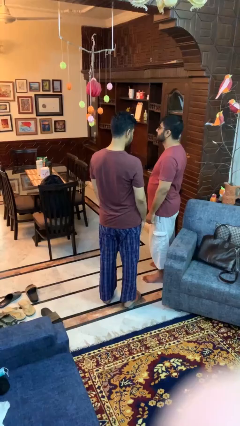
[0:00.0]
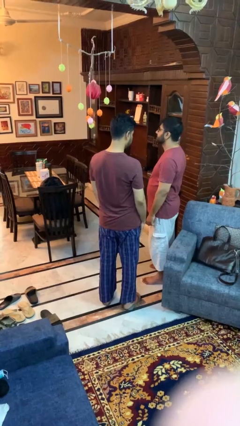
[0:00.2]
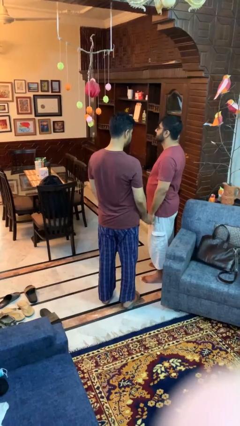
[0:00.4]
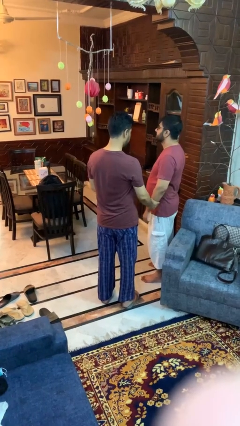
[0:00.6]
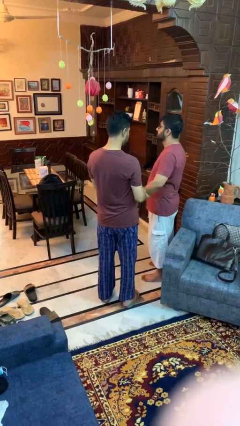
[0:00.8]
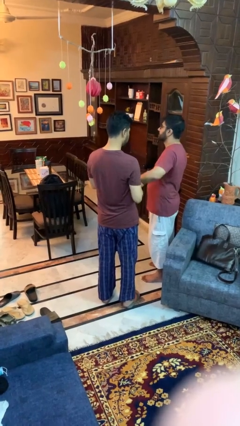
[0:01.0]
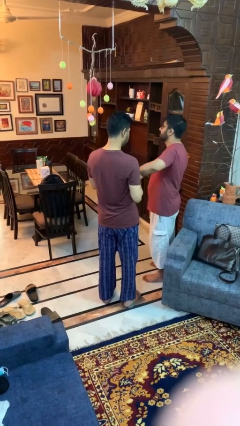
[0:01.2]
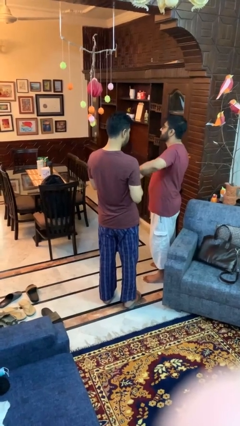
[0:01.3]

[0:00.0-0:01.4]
person grabs person by forearm

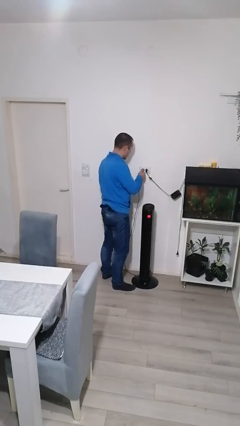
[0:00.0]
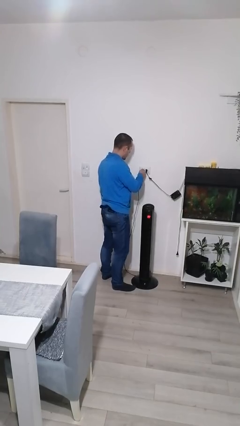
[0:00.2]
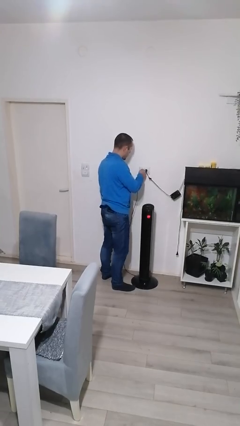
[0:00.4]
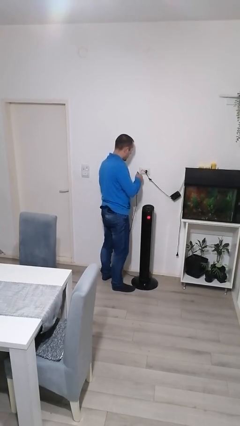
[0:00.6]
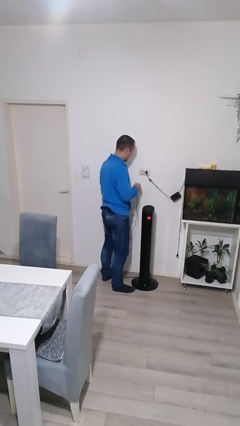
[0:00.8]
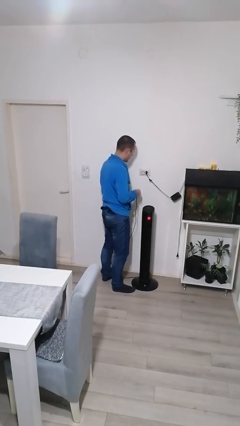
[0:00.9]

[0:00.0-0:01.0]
person unplugs from electrical socket

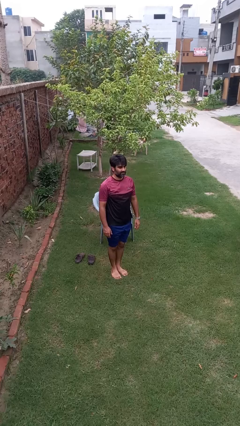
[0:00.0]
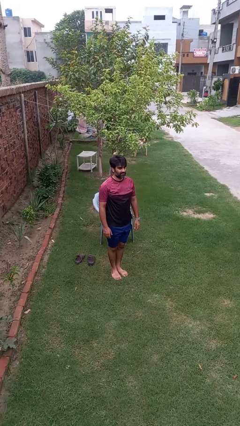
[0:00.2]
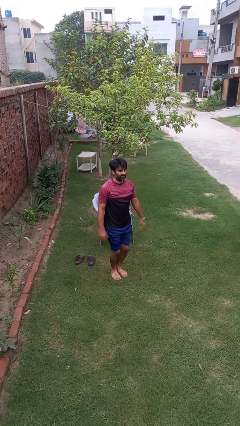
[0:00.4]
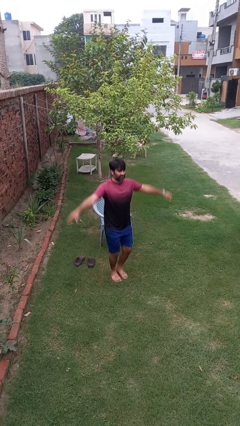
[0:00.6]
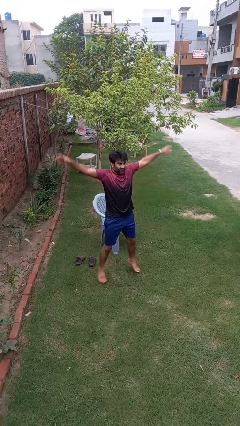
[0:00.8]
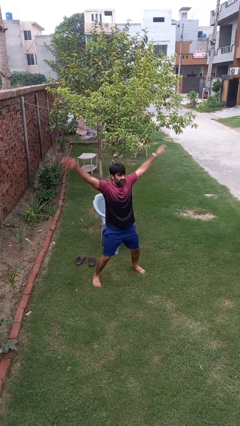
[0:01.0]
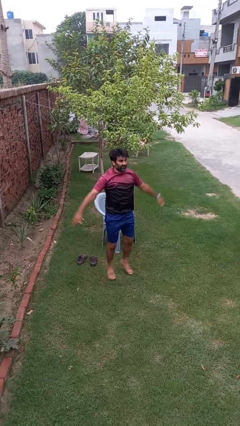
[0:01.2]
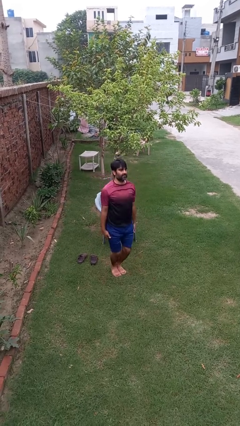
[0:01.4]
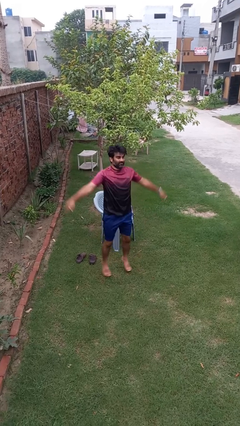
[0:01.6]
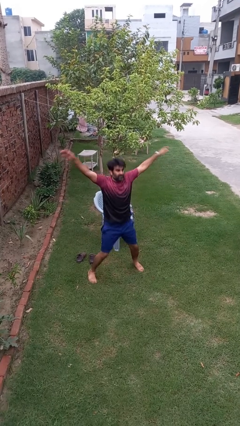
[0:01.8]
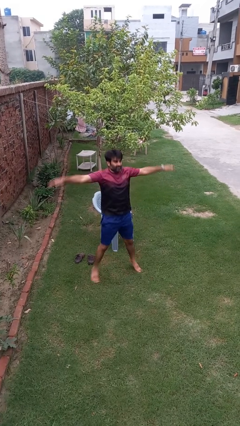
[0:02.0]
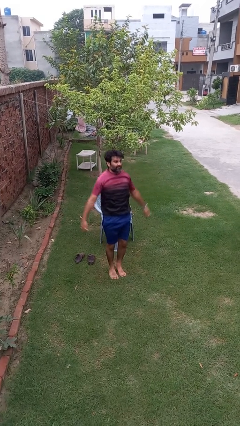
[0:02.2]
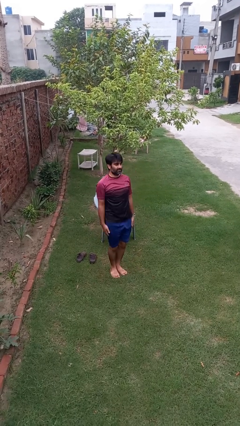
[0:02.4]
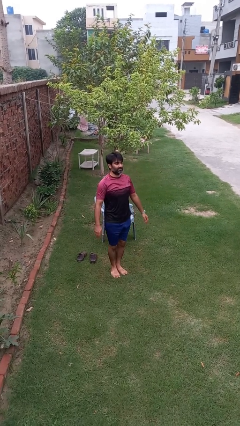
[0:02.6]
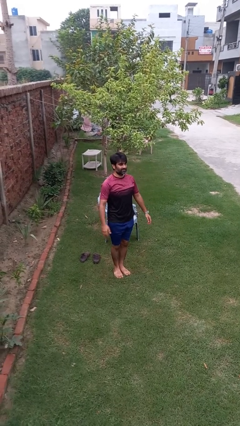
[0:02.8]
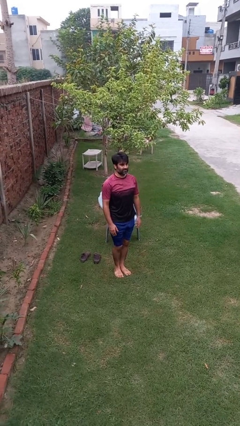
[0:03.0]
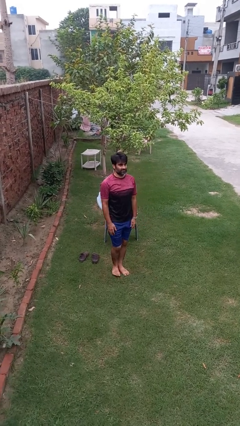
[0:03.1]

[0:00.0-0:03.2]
person exercises with jumping jacks

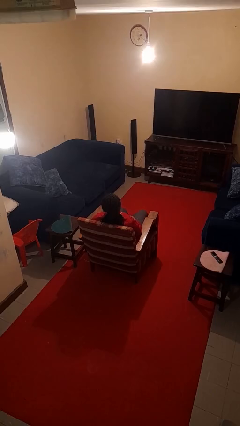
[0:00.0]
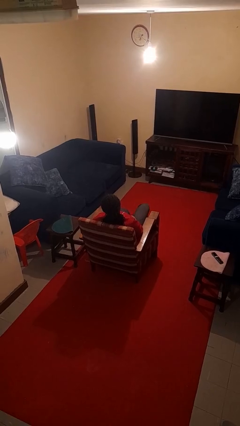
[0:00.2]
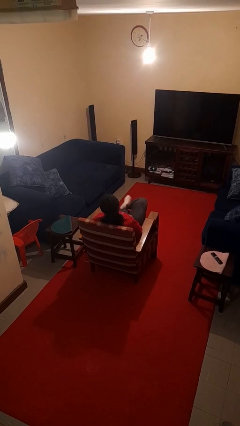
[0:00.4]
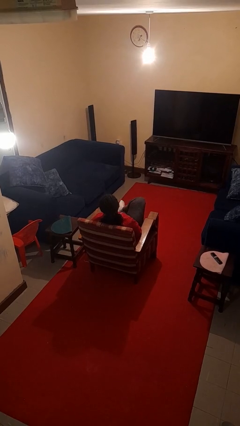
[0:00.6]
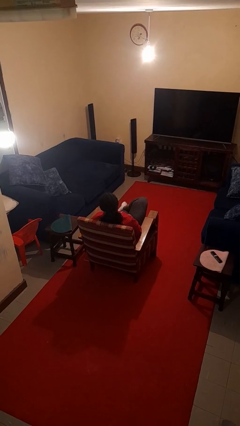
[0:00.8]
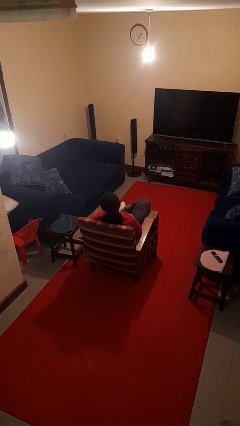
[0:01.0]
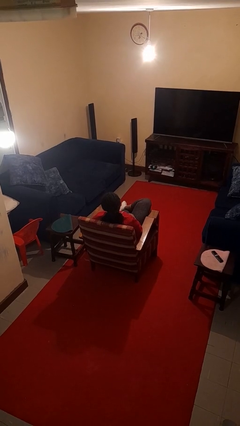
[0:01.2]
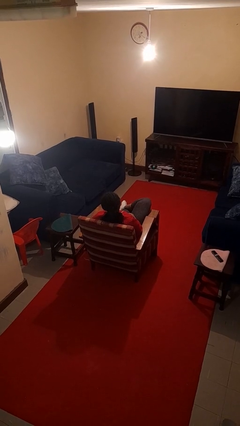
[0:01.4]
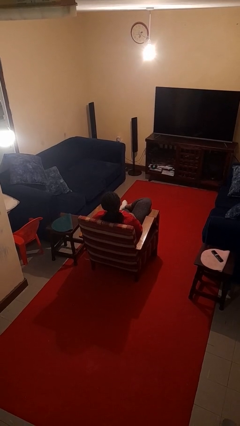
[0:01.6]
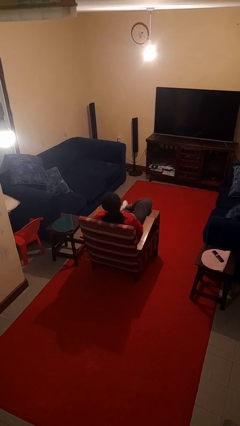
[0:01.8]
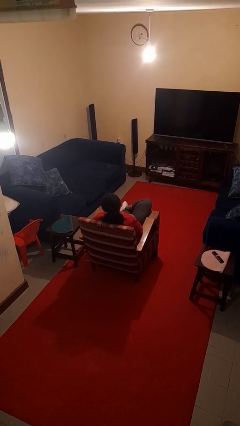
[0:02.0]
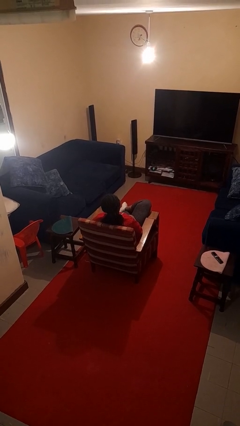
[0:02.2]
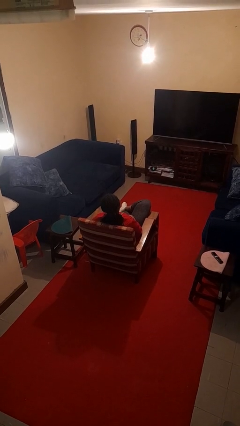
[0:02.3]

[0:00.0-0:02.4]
person crosses legs

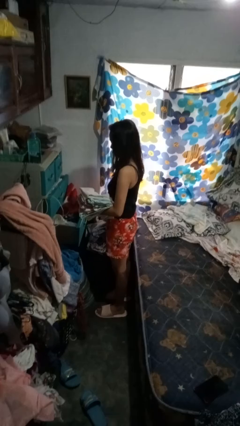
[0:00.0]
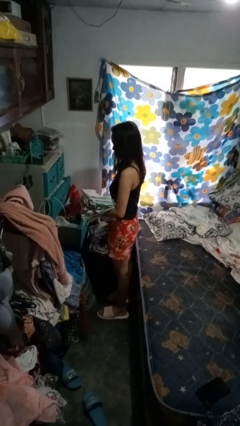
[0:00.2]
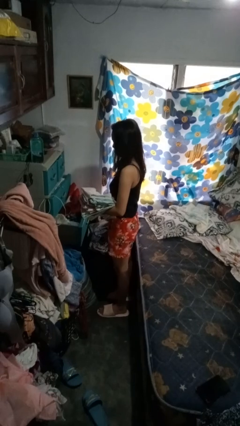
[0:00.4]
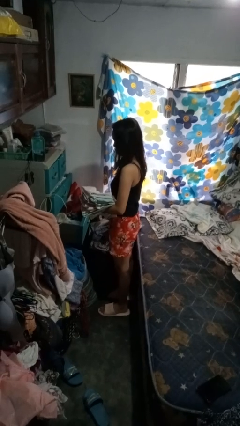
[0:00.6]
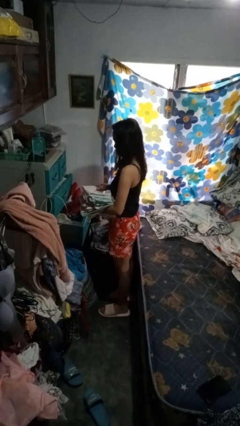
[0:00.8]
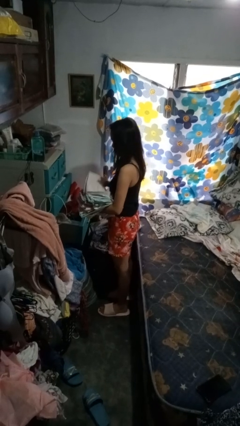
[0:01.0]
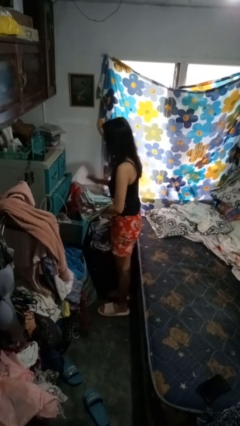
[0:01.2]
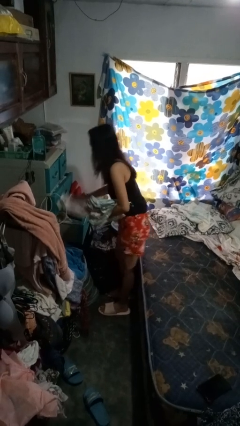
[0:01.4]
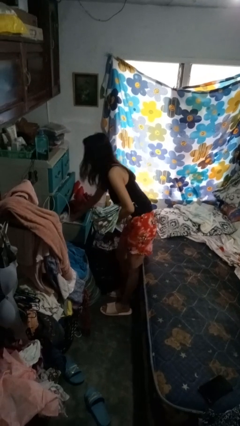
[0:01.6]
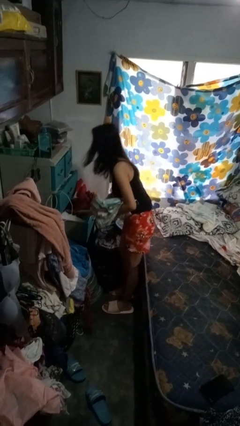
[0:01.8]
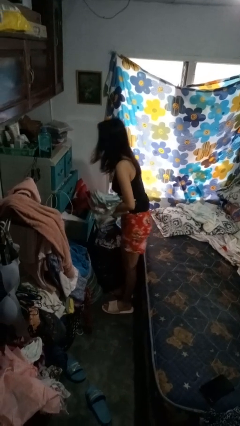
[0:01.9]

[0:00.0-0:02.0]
person puts clothes into dresser

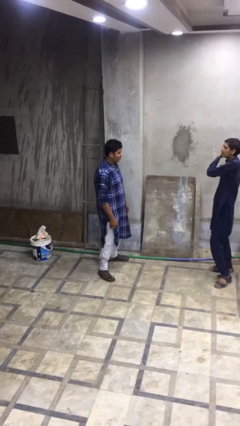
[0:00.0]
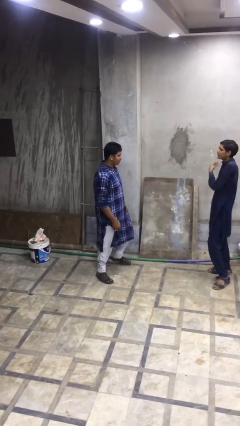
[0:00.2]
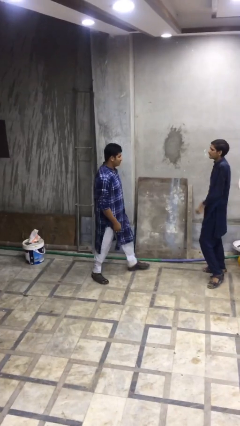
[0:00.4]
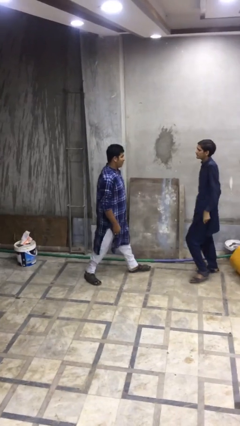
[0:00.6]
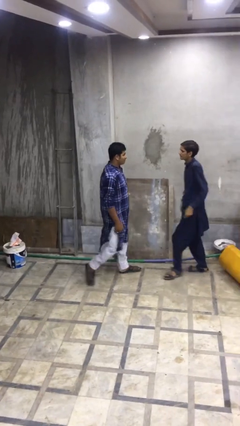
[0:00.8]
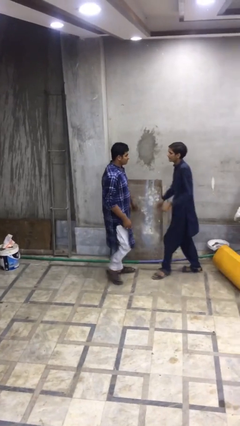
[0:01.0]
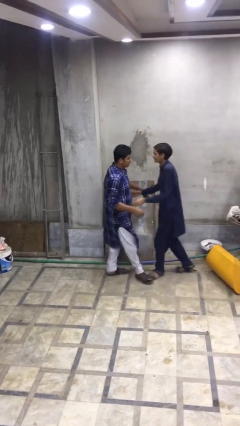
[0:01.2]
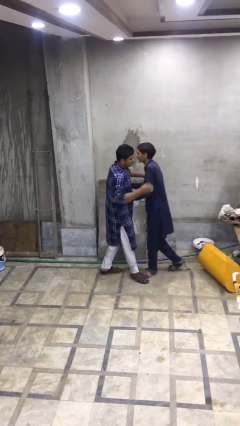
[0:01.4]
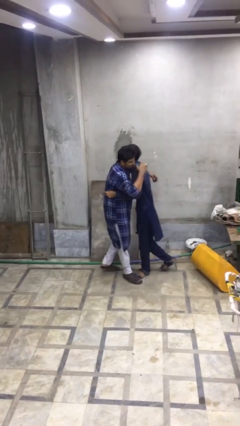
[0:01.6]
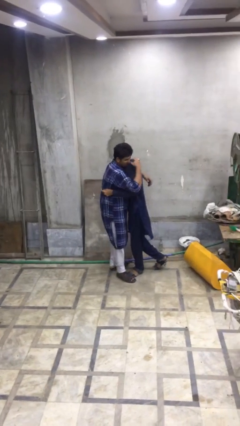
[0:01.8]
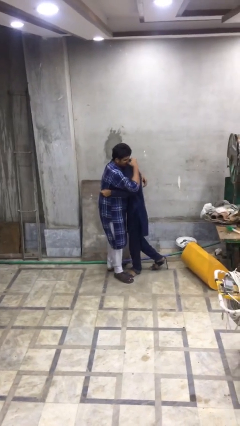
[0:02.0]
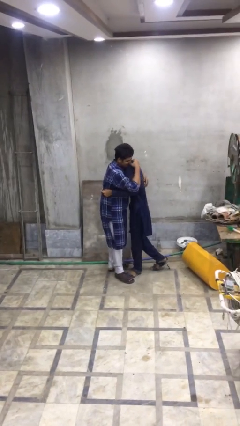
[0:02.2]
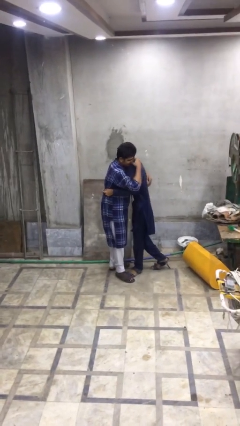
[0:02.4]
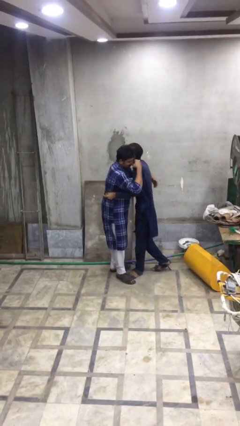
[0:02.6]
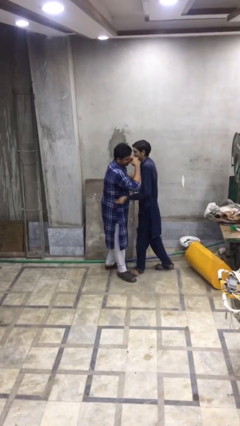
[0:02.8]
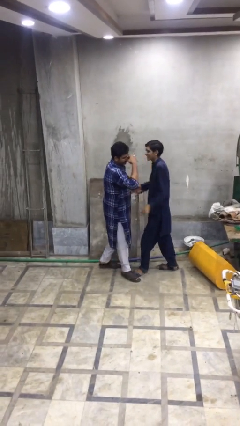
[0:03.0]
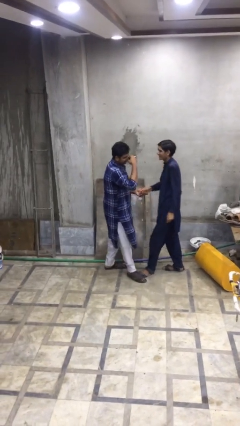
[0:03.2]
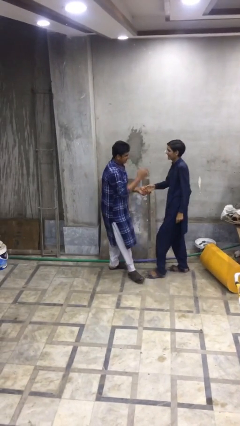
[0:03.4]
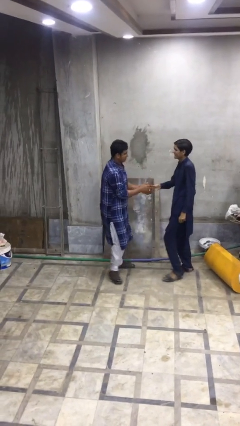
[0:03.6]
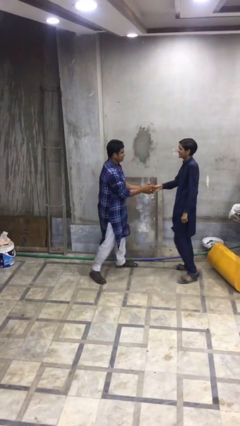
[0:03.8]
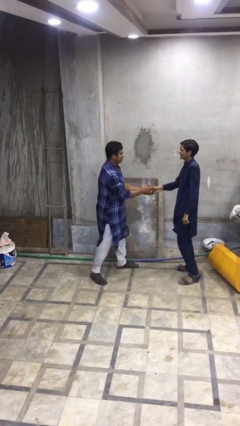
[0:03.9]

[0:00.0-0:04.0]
person embraces person

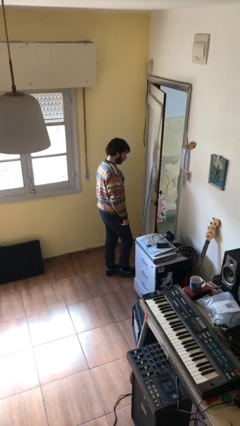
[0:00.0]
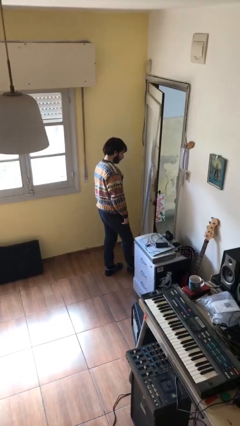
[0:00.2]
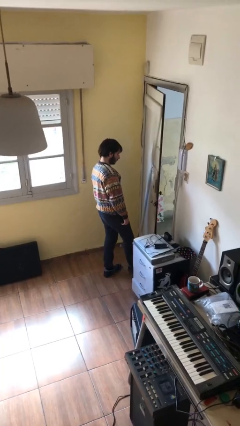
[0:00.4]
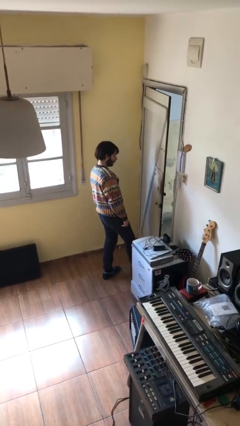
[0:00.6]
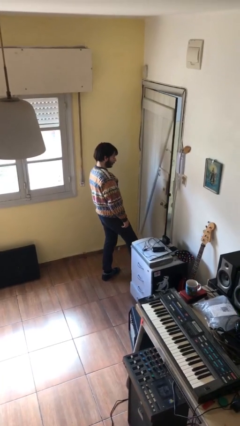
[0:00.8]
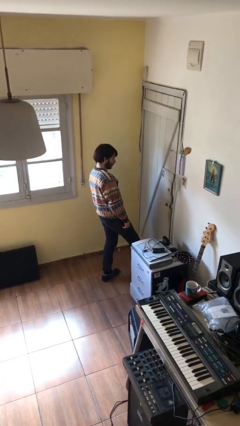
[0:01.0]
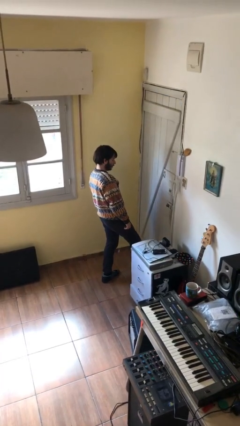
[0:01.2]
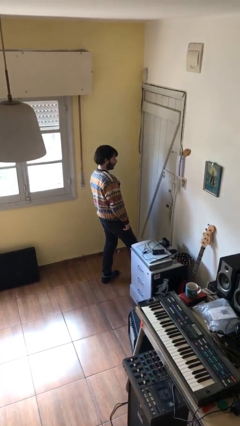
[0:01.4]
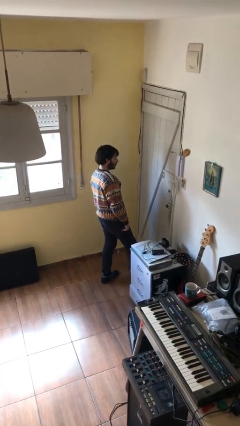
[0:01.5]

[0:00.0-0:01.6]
person closes door with foot

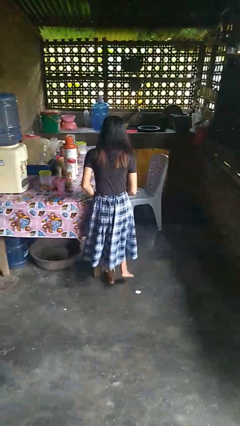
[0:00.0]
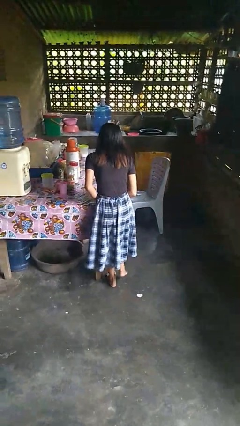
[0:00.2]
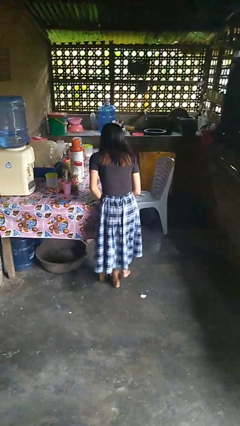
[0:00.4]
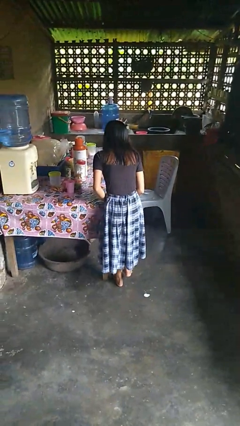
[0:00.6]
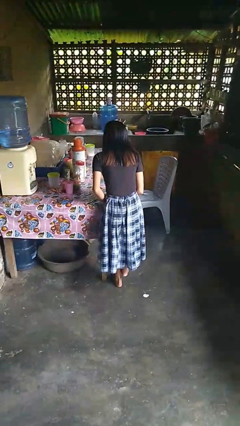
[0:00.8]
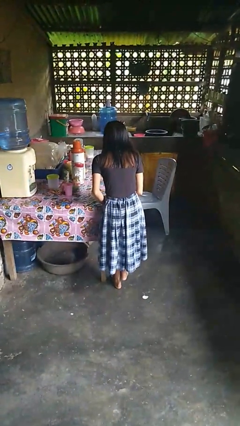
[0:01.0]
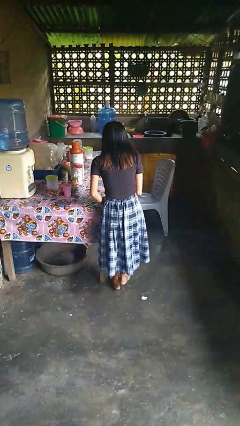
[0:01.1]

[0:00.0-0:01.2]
person bumps into table

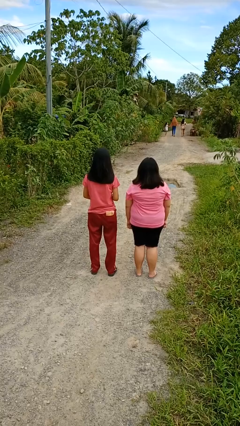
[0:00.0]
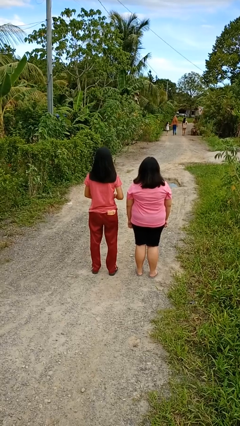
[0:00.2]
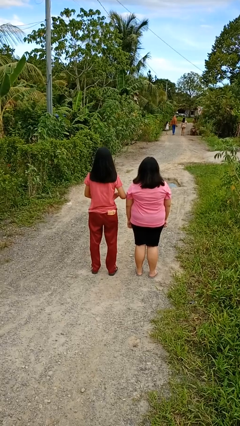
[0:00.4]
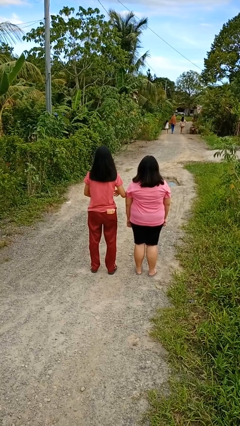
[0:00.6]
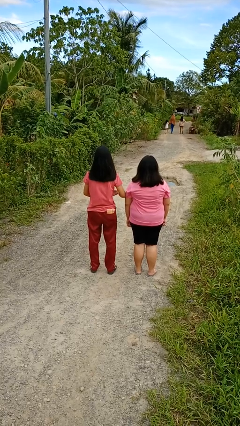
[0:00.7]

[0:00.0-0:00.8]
person nudges person with elbow
